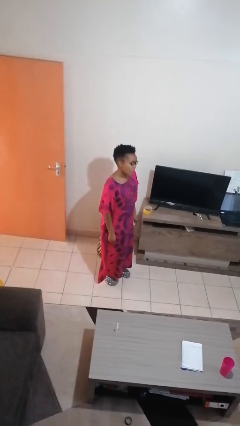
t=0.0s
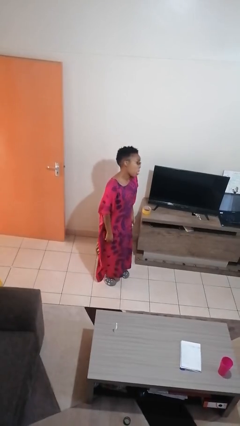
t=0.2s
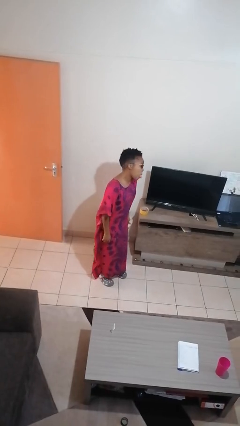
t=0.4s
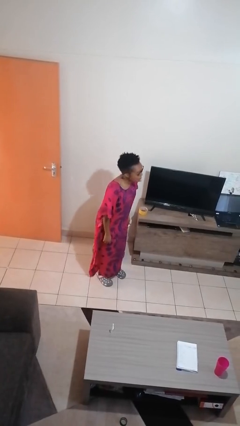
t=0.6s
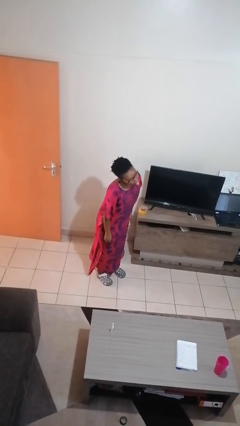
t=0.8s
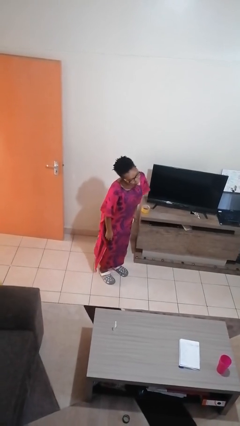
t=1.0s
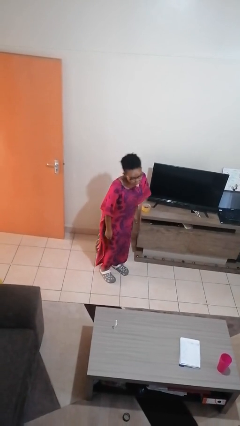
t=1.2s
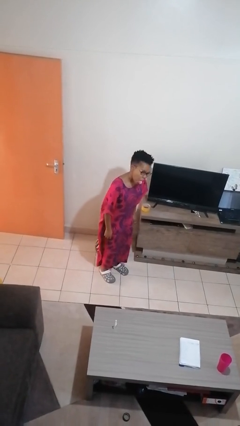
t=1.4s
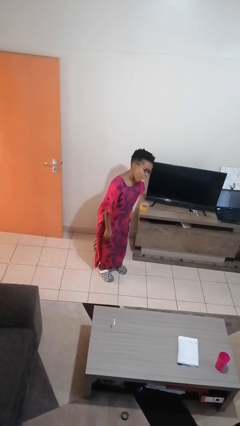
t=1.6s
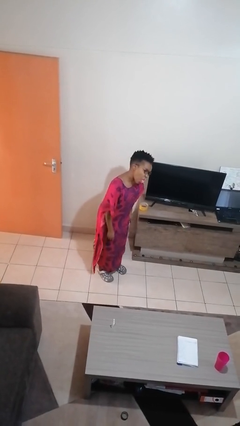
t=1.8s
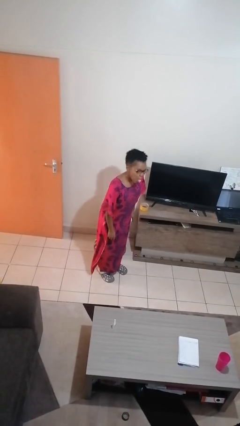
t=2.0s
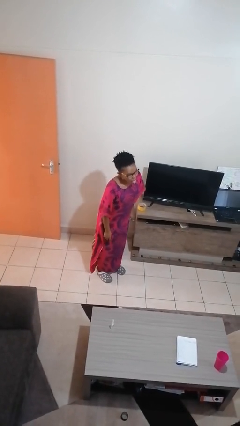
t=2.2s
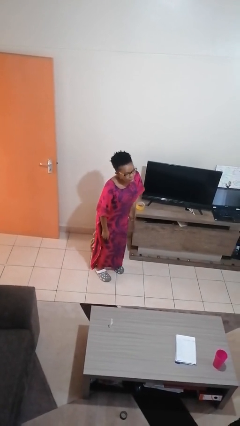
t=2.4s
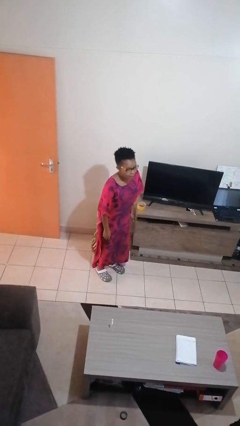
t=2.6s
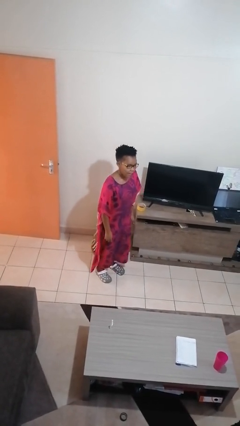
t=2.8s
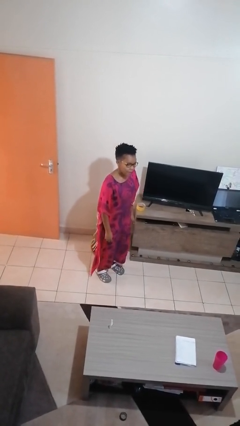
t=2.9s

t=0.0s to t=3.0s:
person sticks out tongue

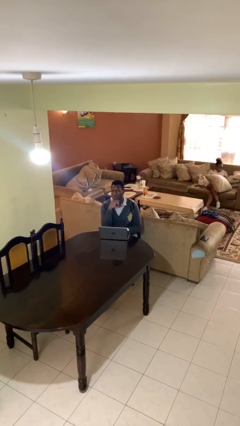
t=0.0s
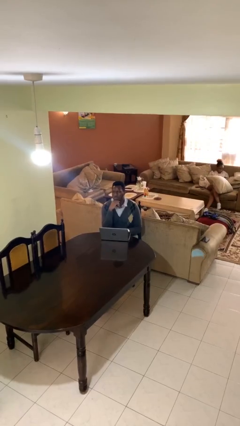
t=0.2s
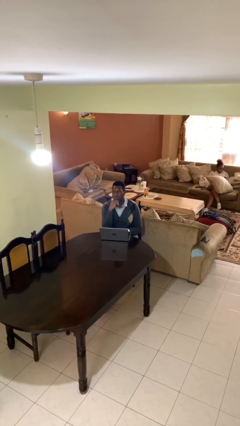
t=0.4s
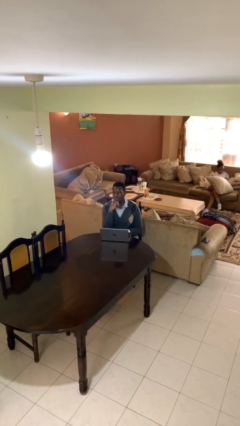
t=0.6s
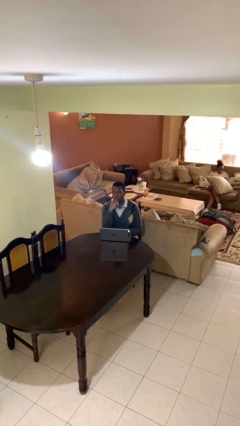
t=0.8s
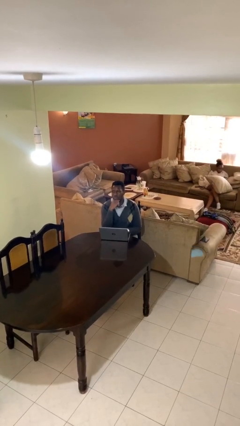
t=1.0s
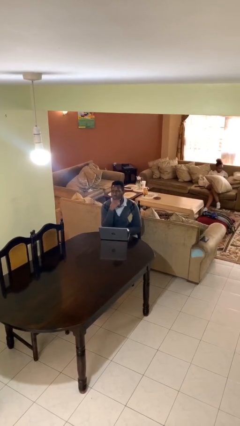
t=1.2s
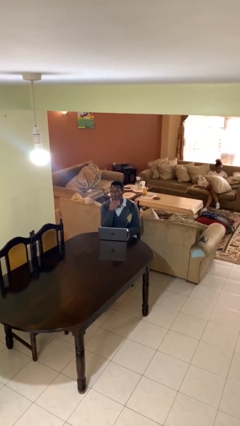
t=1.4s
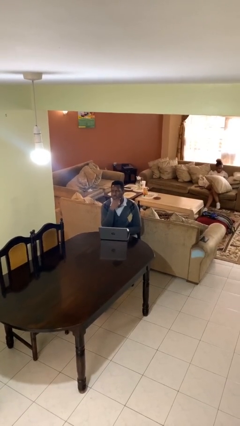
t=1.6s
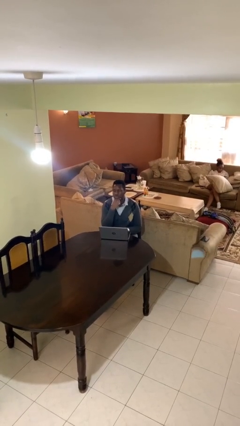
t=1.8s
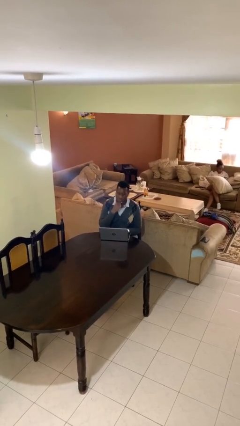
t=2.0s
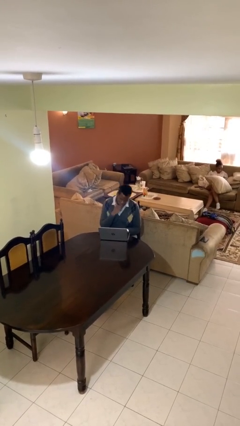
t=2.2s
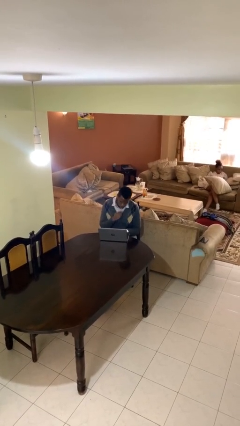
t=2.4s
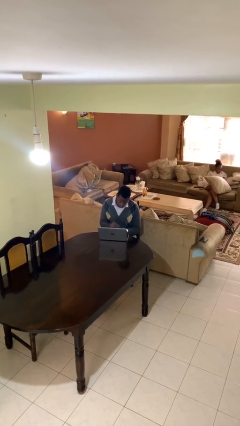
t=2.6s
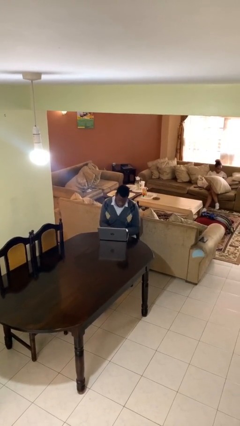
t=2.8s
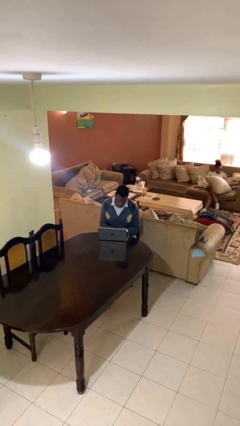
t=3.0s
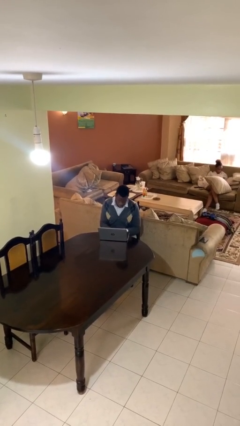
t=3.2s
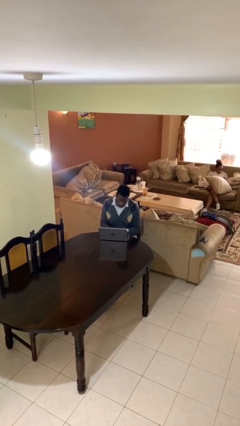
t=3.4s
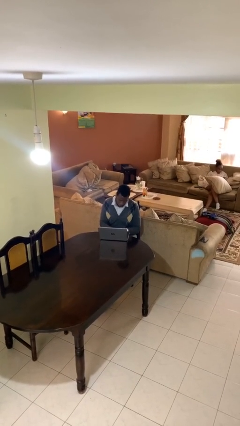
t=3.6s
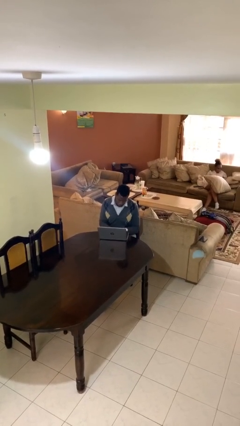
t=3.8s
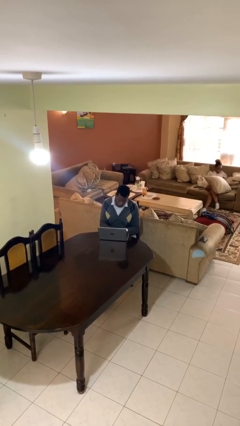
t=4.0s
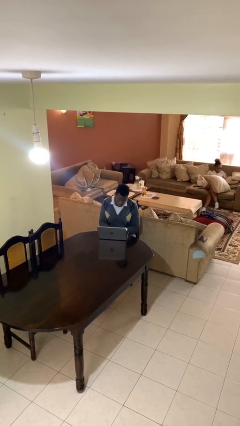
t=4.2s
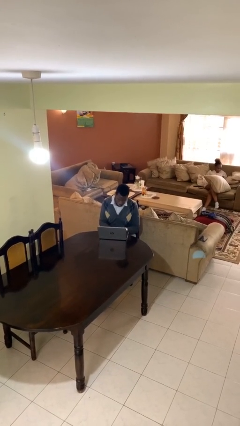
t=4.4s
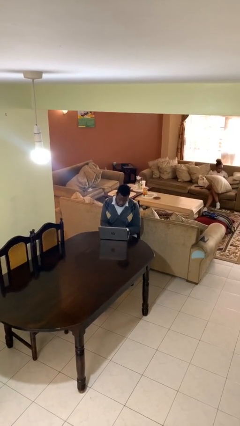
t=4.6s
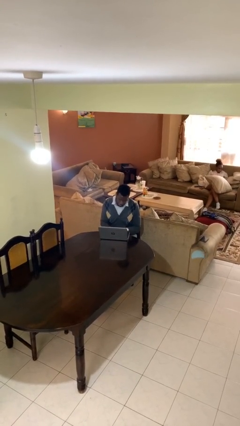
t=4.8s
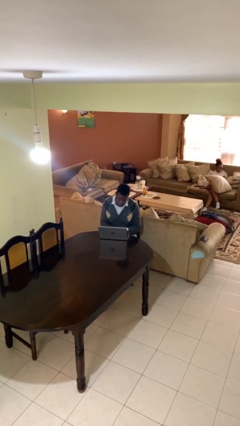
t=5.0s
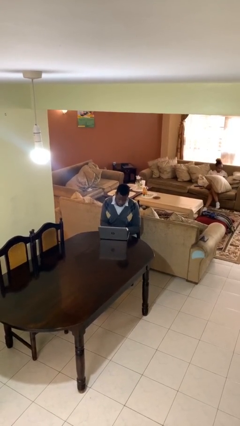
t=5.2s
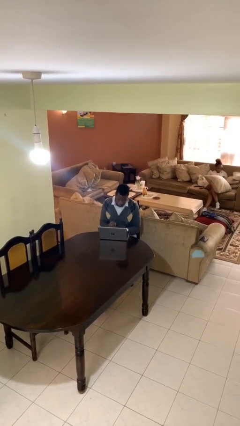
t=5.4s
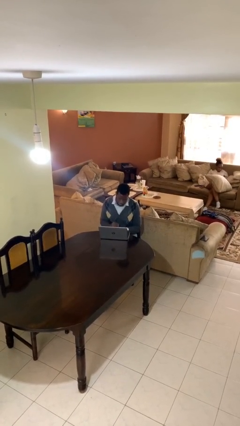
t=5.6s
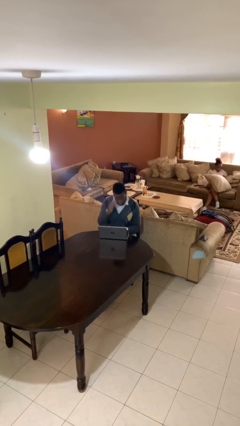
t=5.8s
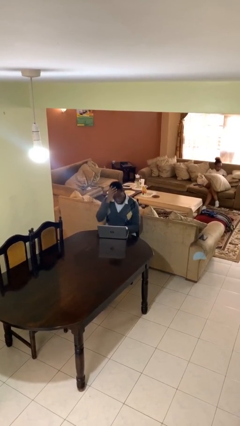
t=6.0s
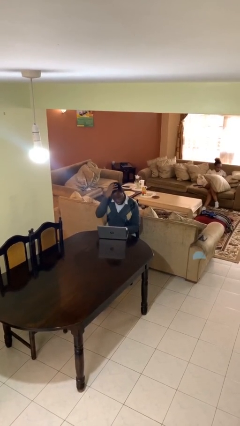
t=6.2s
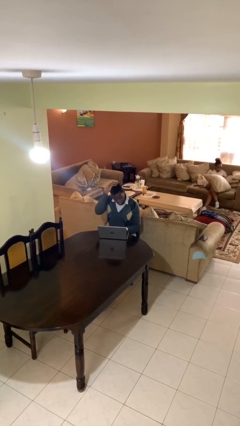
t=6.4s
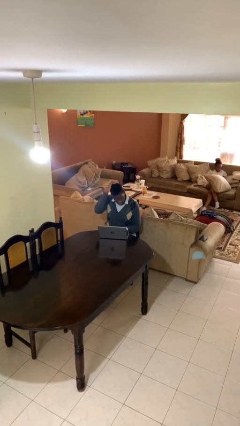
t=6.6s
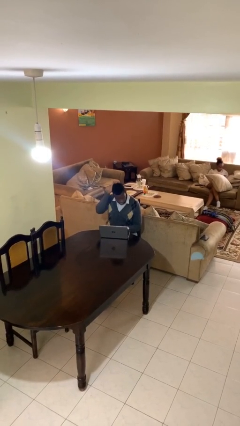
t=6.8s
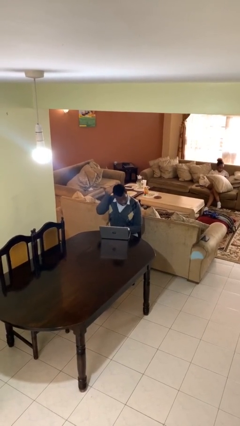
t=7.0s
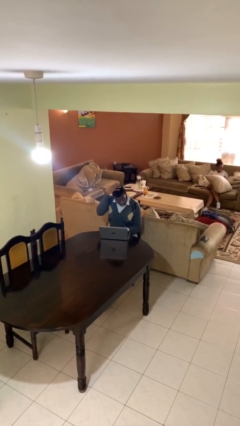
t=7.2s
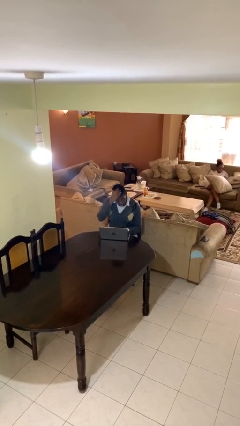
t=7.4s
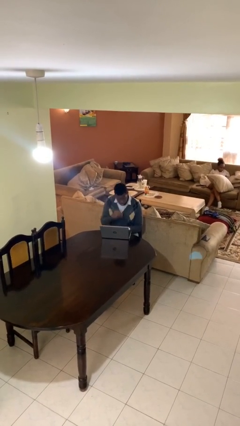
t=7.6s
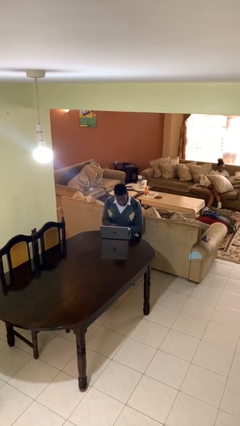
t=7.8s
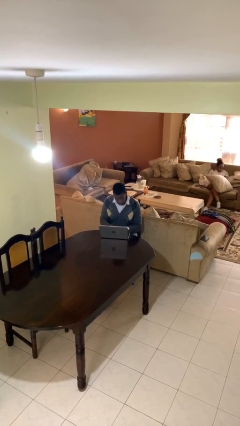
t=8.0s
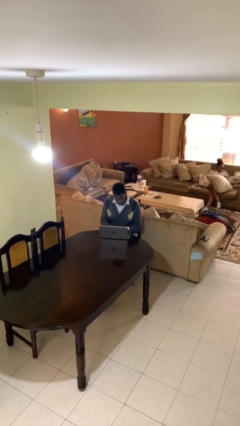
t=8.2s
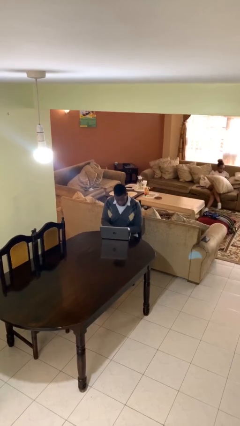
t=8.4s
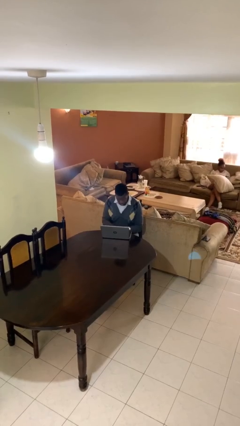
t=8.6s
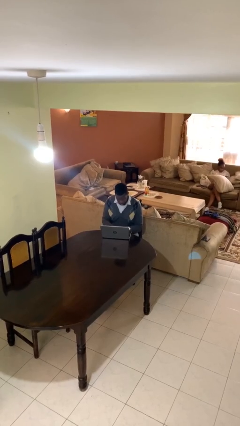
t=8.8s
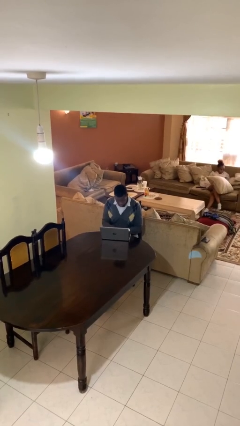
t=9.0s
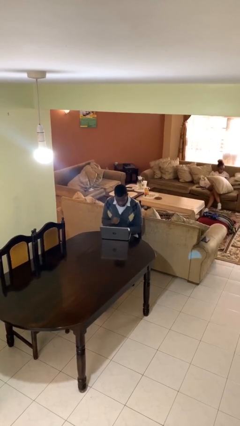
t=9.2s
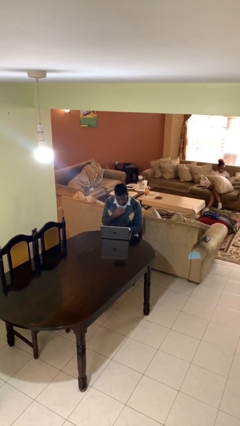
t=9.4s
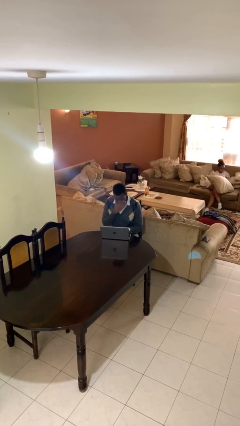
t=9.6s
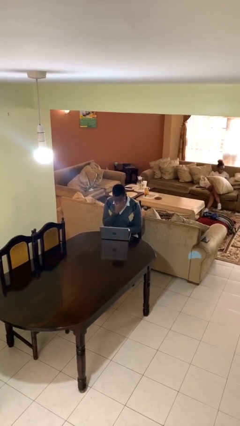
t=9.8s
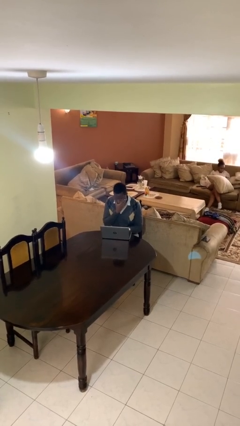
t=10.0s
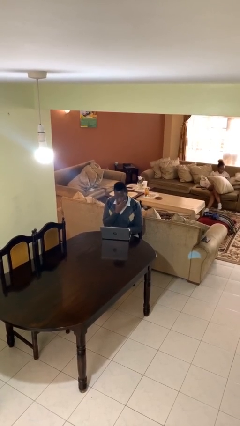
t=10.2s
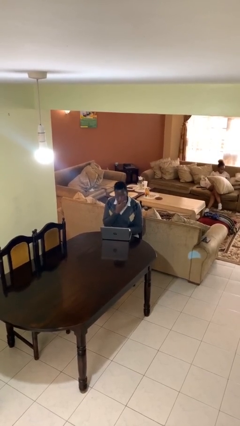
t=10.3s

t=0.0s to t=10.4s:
person interacts with laptop

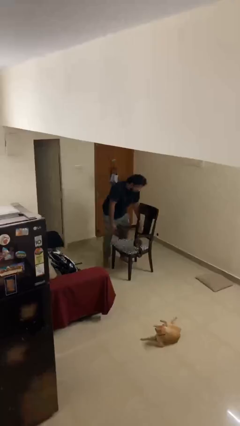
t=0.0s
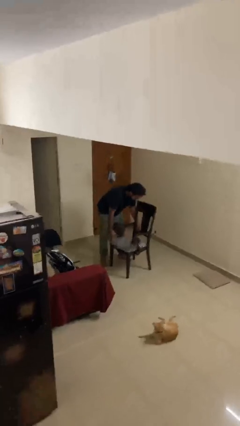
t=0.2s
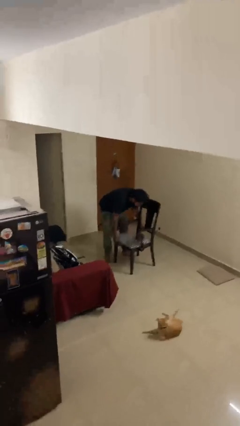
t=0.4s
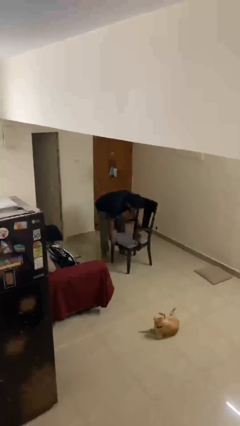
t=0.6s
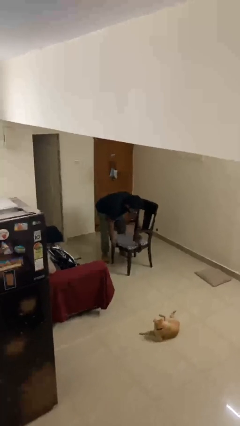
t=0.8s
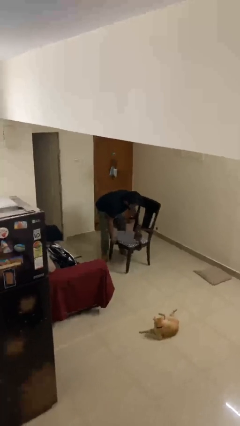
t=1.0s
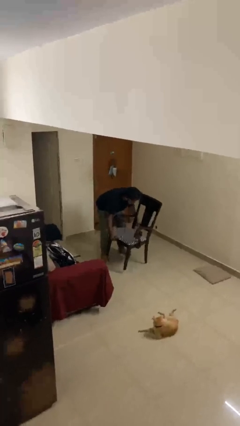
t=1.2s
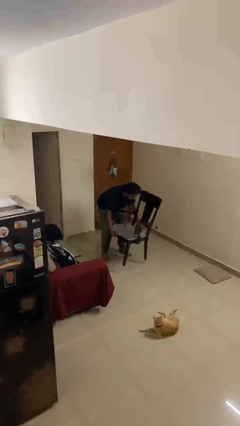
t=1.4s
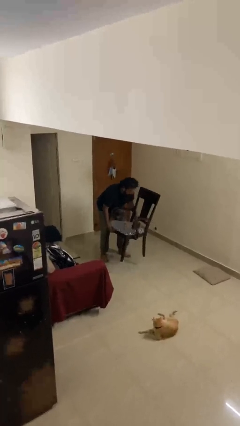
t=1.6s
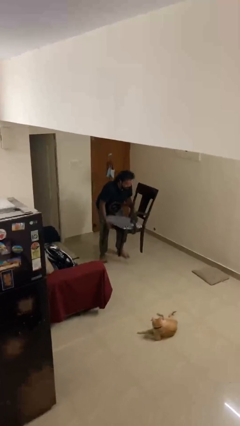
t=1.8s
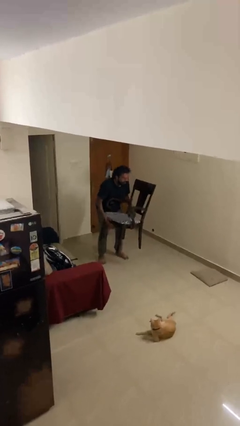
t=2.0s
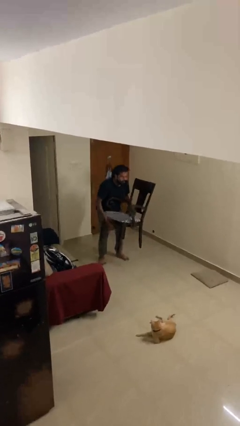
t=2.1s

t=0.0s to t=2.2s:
person picks up object from floor

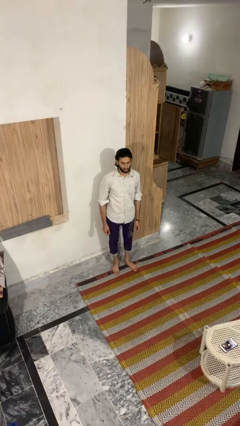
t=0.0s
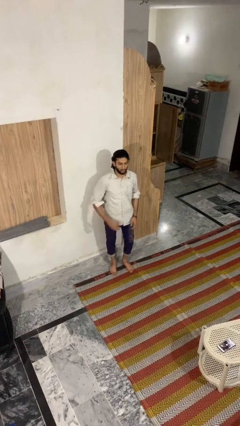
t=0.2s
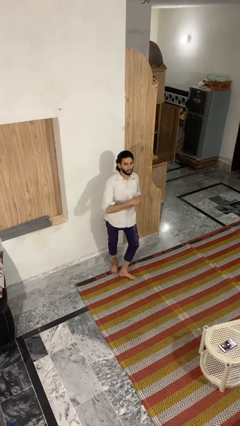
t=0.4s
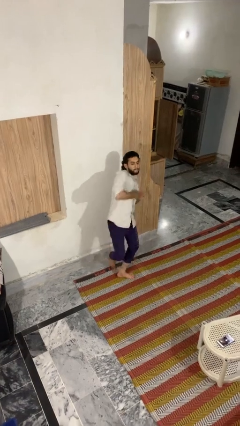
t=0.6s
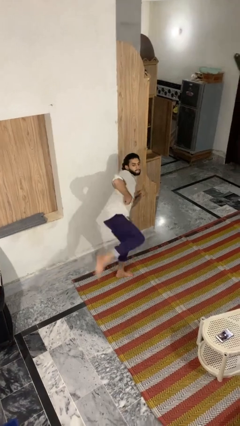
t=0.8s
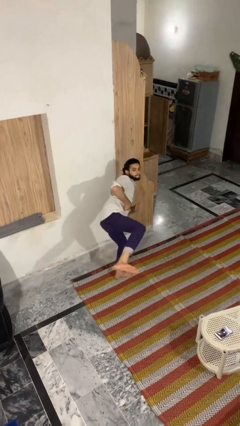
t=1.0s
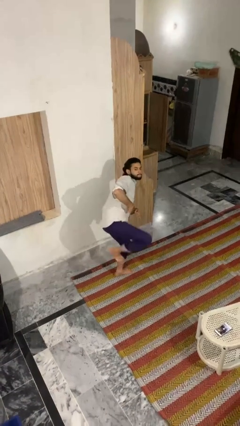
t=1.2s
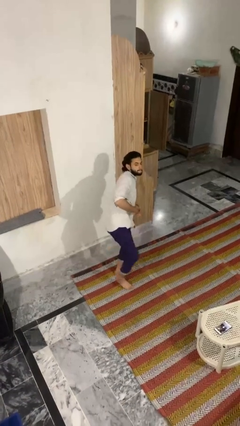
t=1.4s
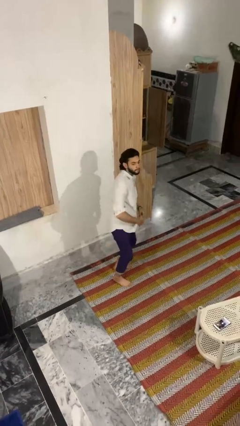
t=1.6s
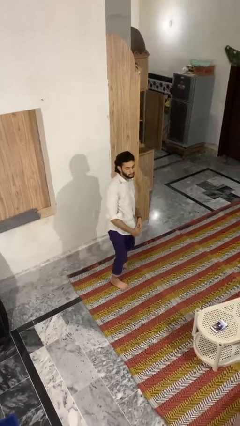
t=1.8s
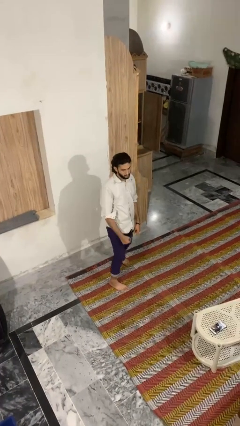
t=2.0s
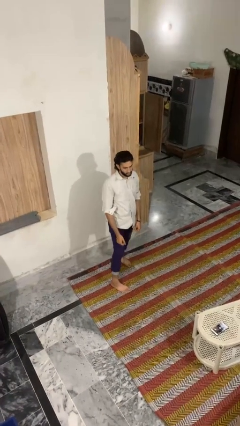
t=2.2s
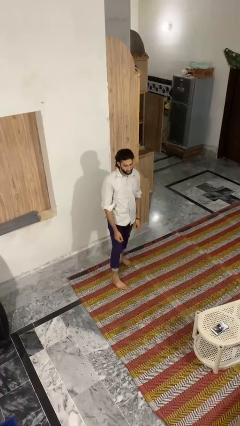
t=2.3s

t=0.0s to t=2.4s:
person karate kicks
